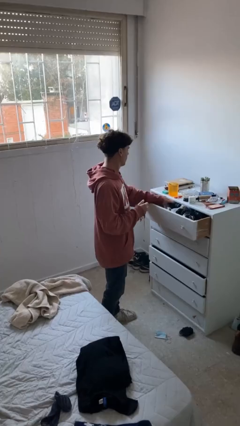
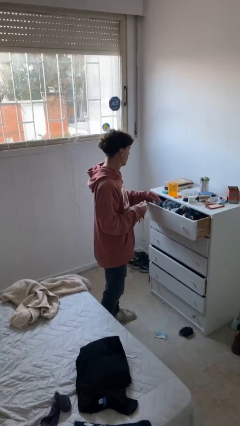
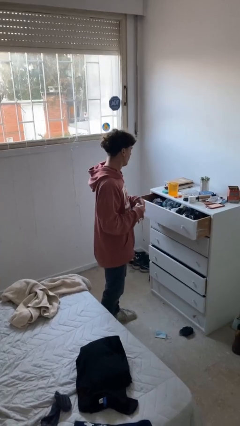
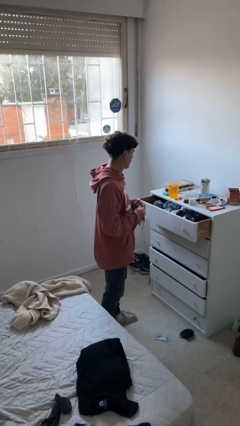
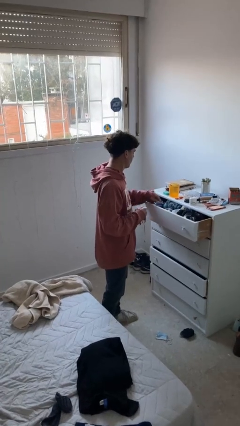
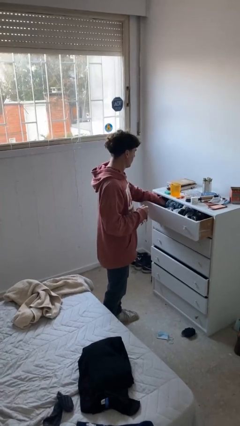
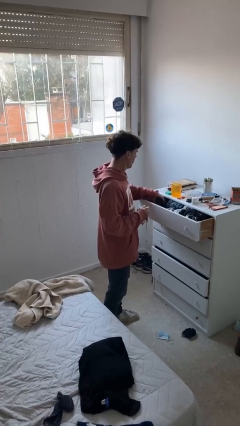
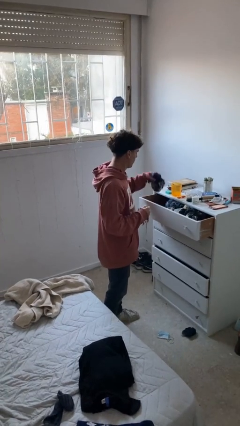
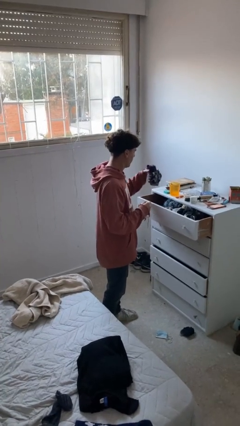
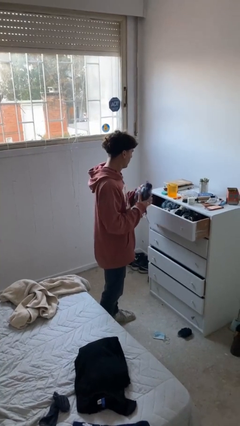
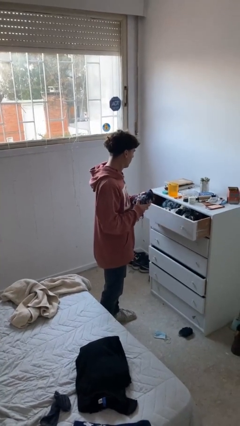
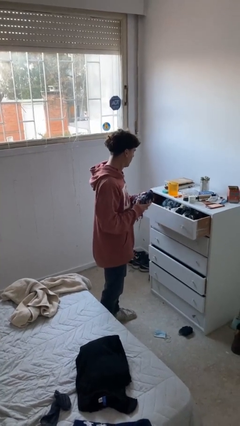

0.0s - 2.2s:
person takes clothes from dresser

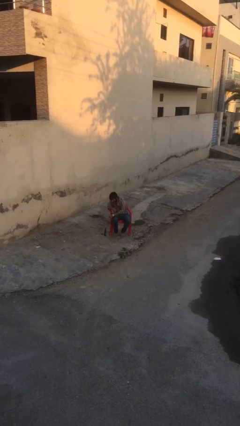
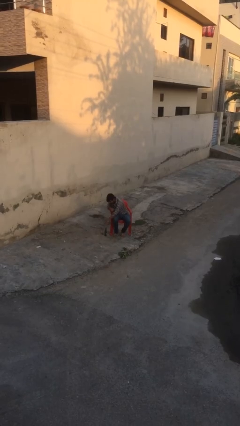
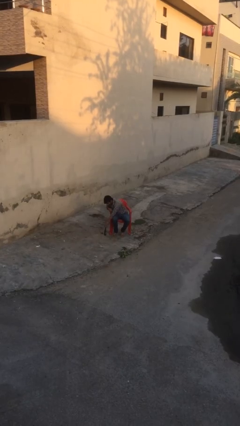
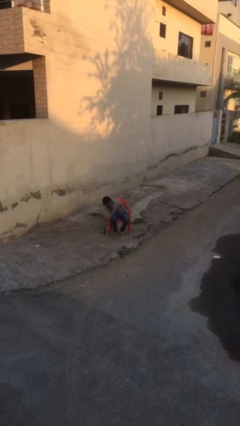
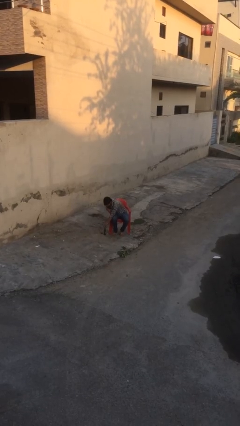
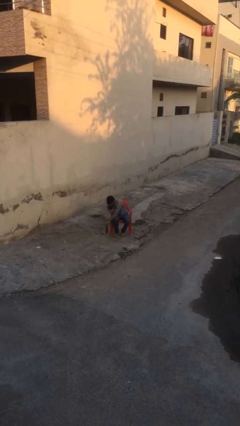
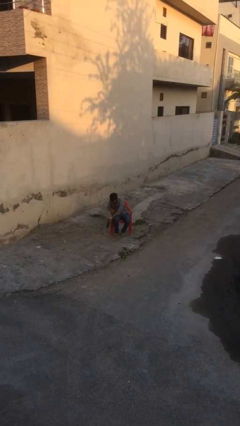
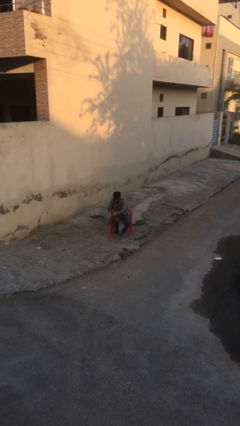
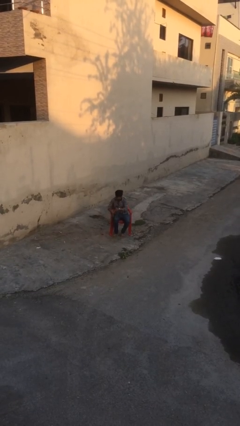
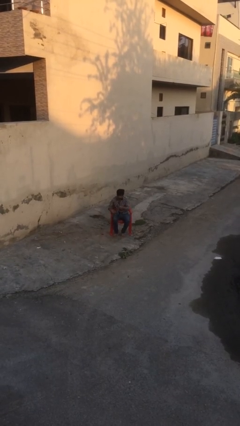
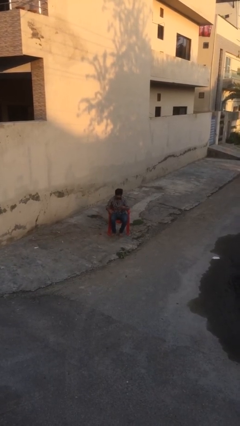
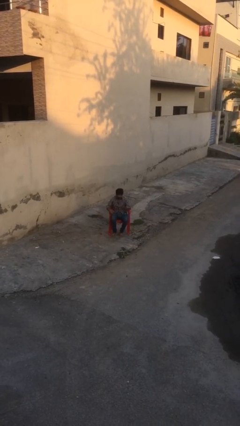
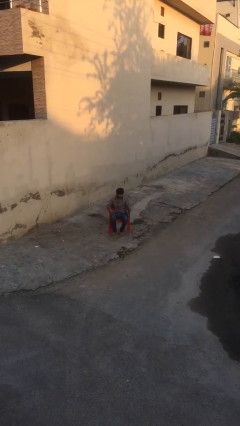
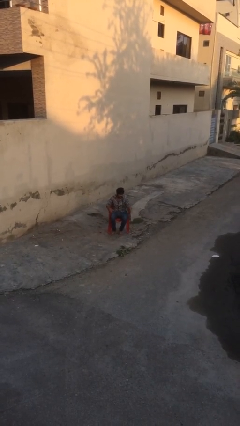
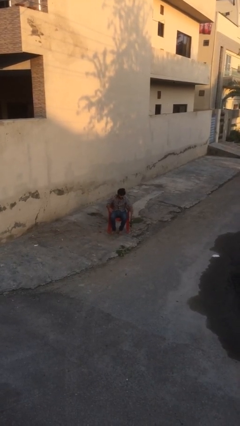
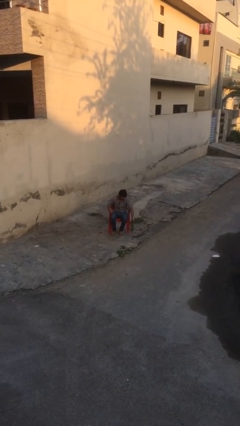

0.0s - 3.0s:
person picks up object from floor

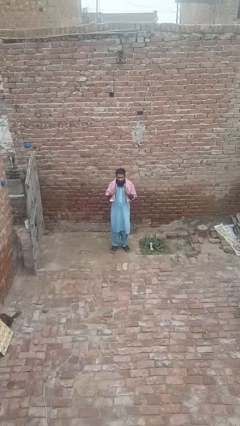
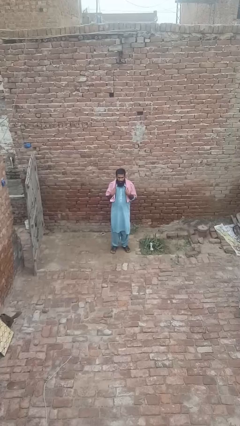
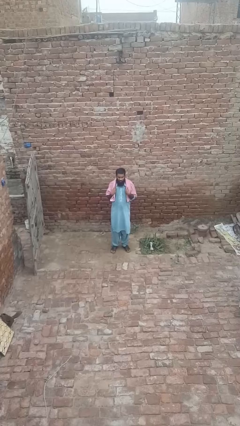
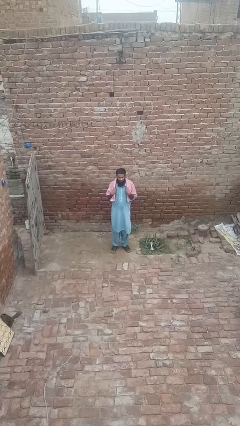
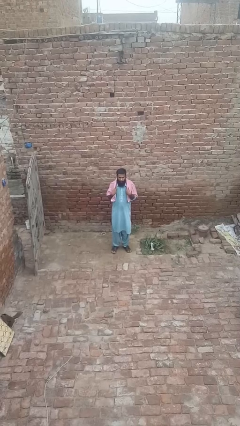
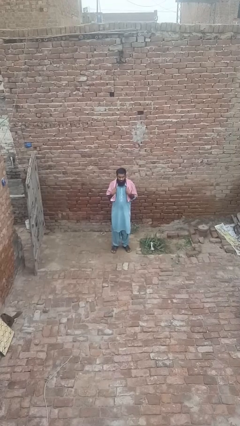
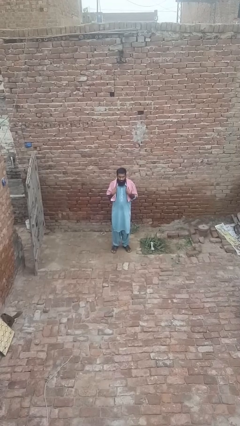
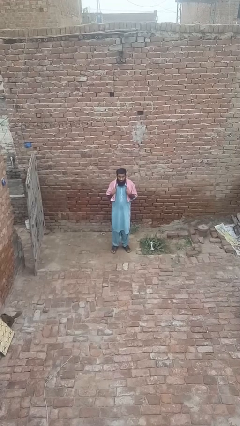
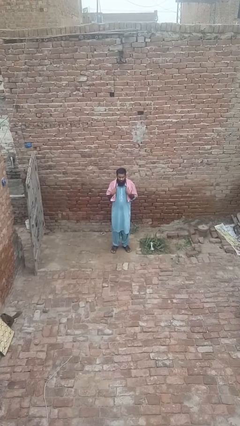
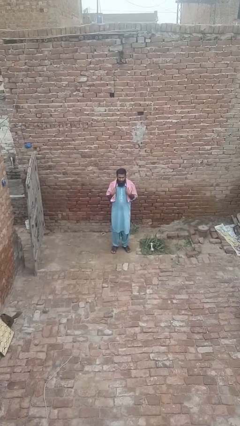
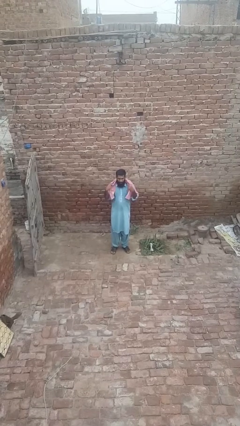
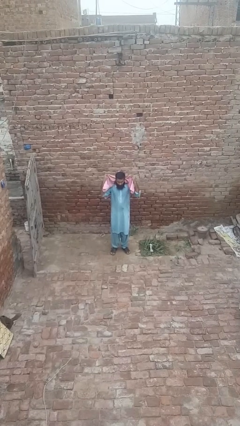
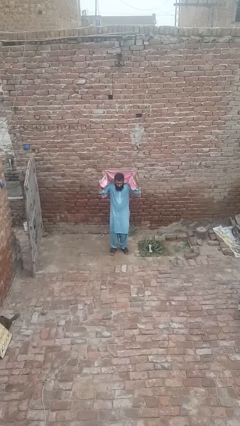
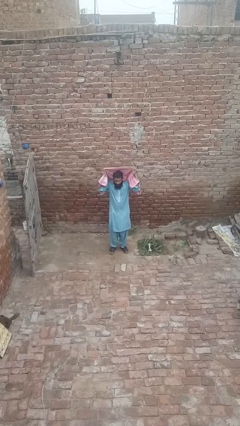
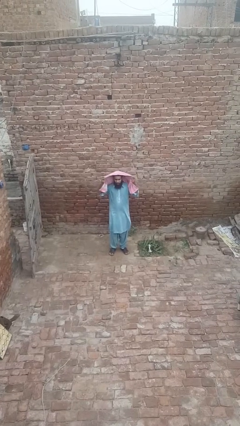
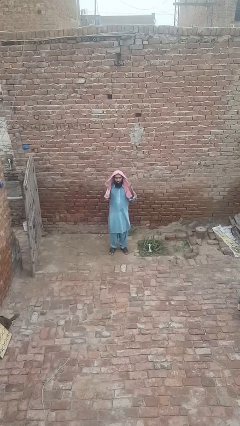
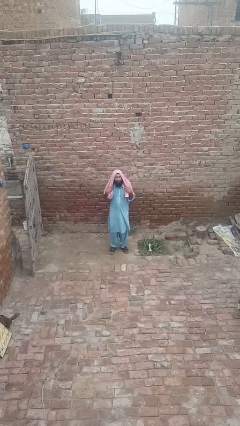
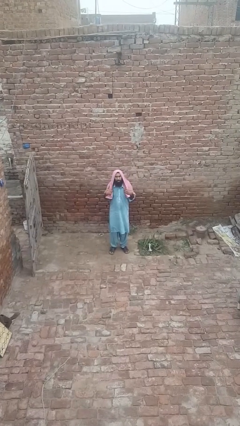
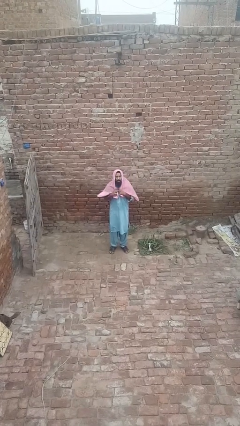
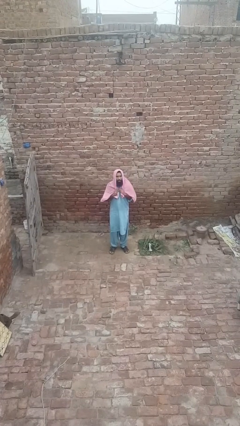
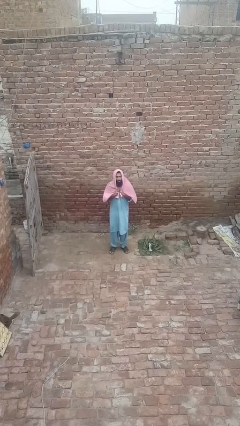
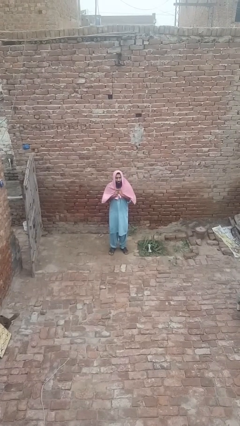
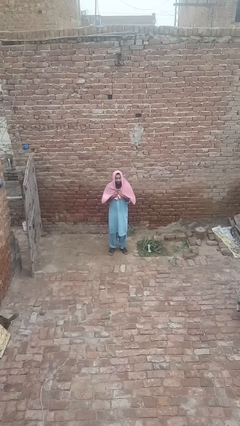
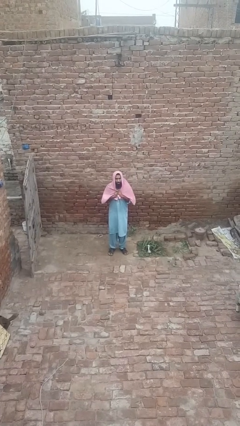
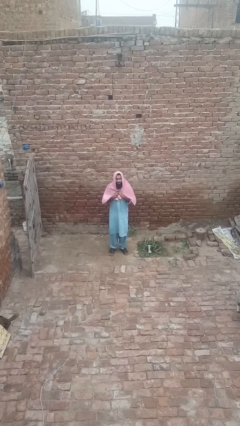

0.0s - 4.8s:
person puts on hoodie

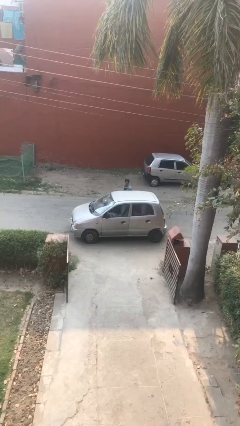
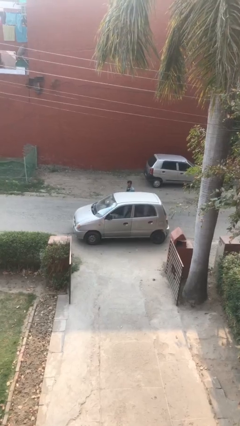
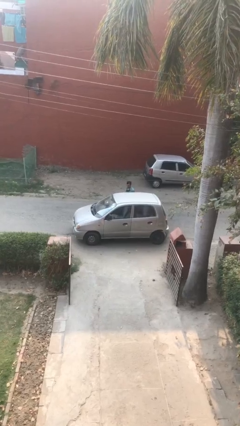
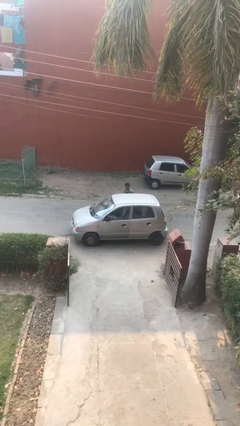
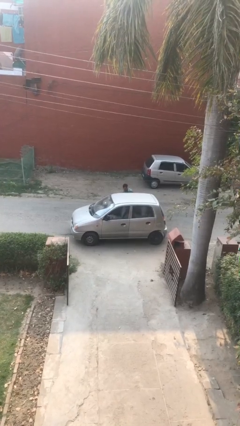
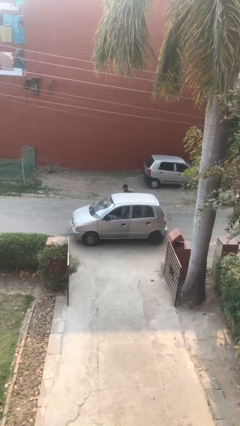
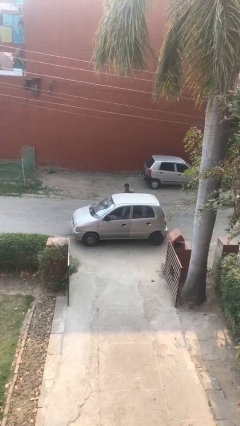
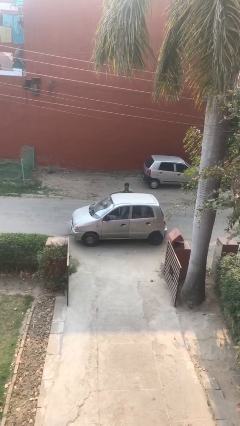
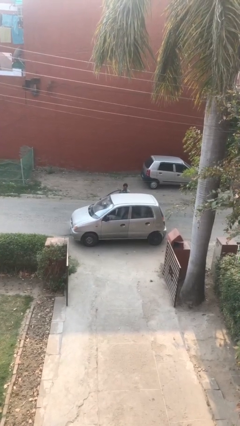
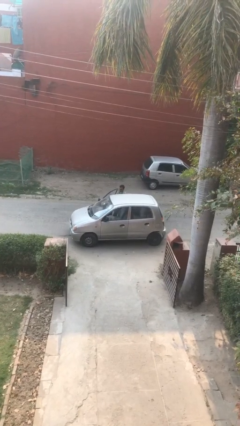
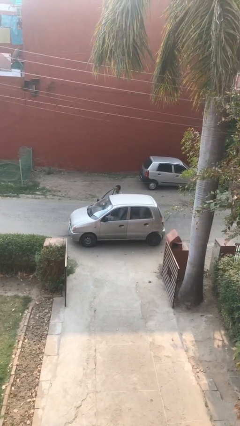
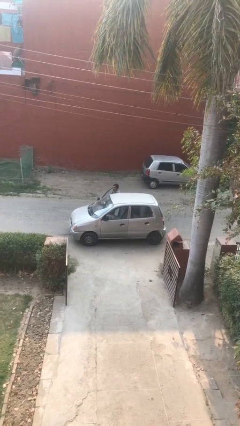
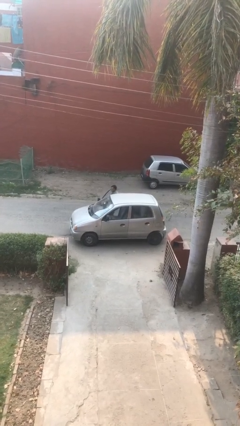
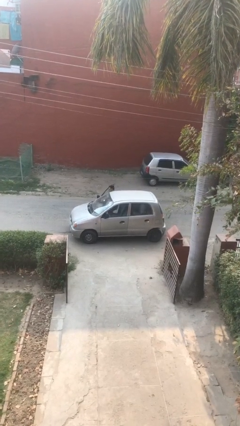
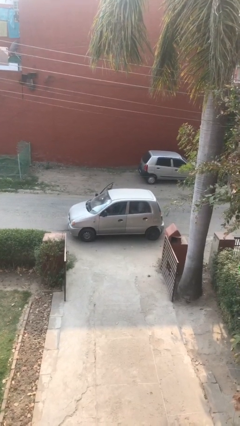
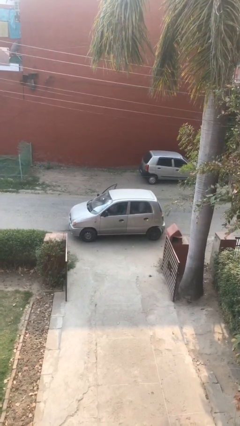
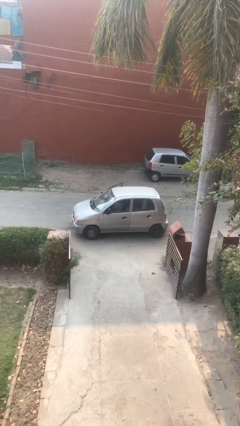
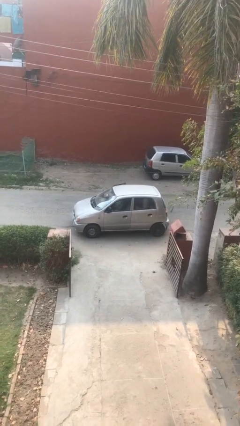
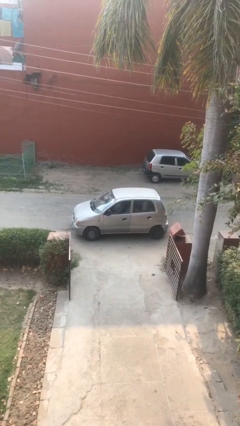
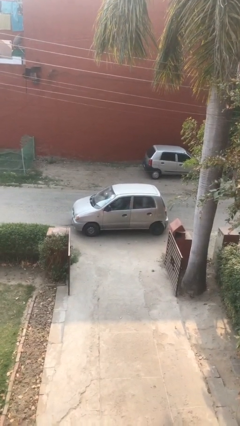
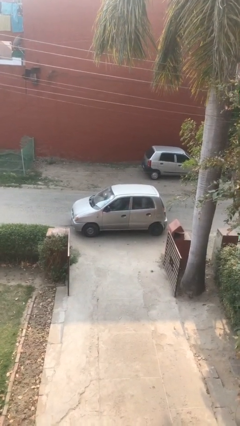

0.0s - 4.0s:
car picks up person

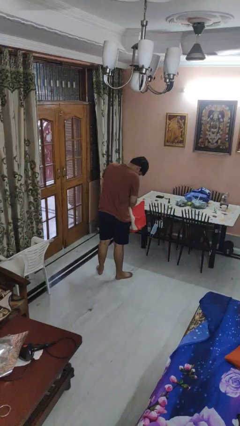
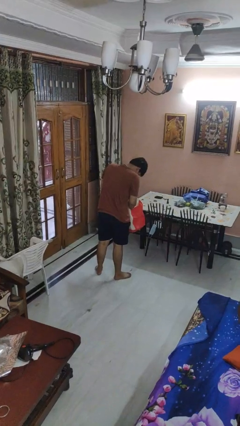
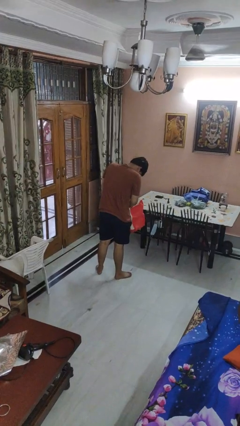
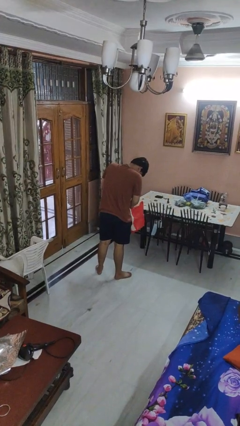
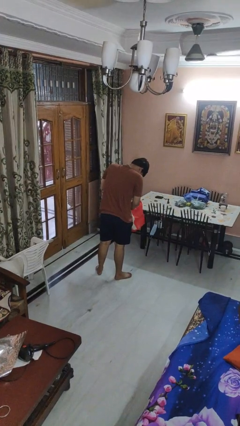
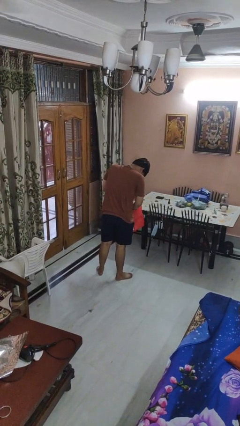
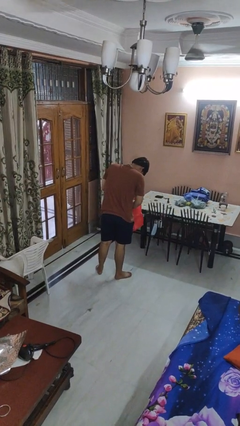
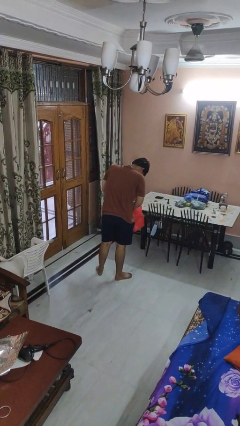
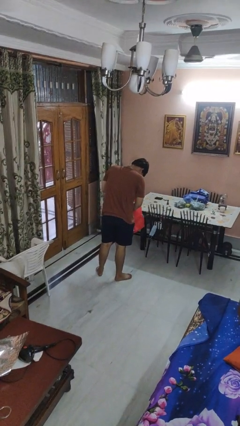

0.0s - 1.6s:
person searches in bag

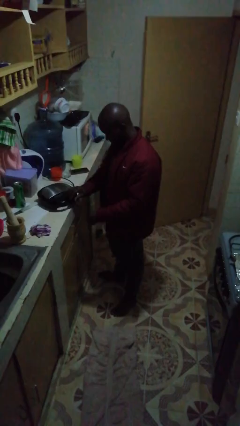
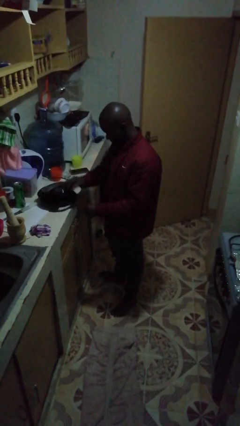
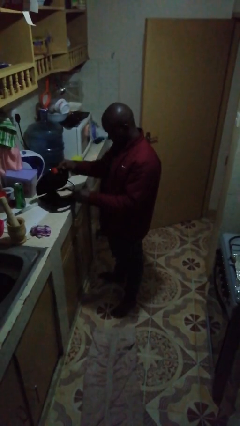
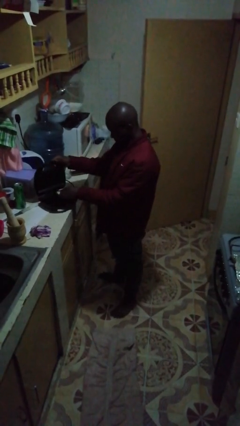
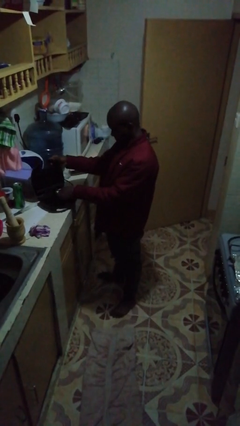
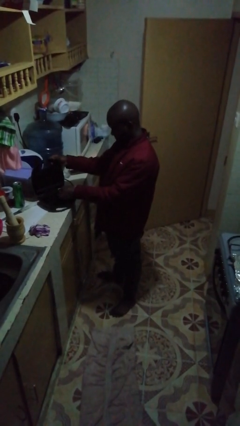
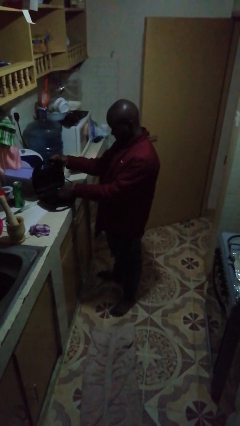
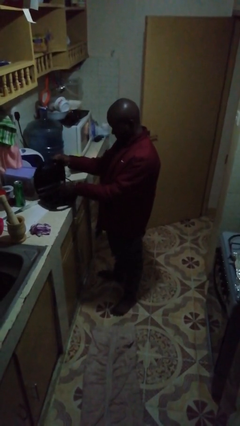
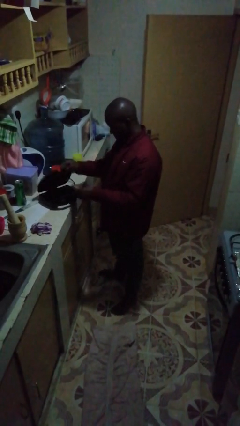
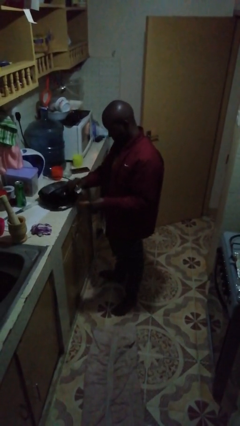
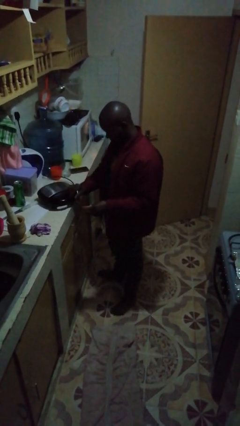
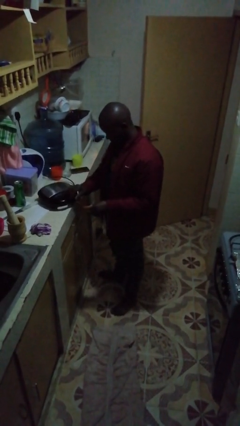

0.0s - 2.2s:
person takes object from toaster
